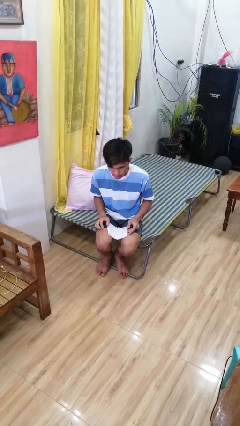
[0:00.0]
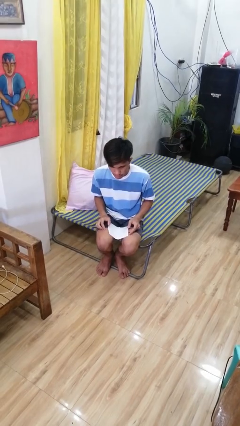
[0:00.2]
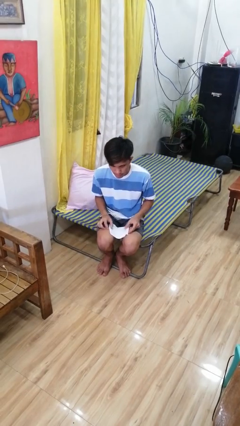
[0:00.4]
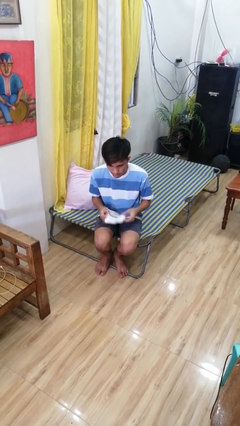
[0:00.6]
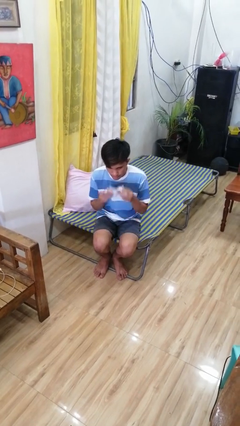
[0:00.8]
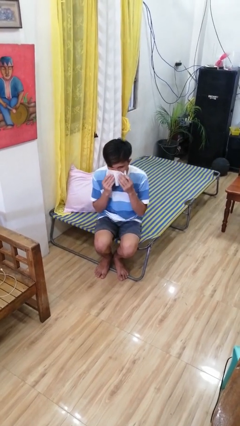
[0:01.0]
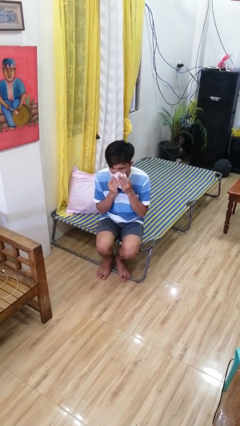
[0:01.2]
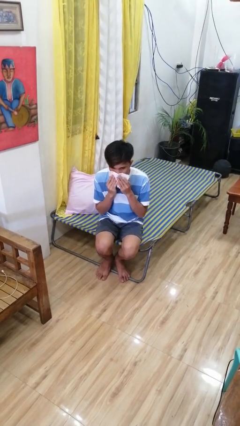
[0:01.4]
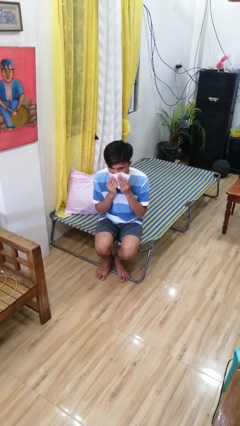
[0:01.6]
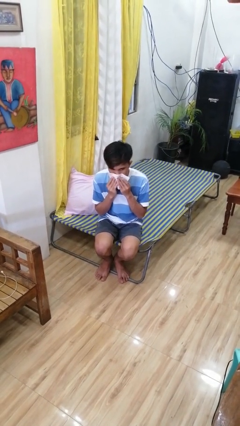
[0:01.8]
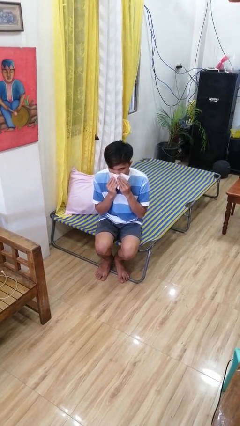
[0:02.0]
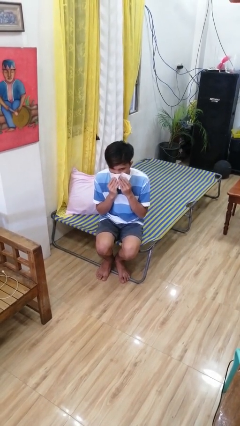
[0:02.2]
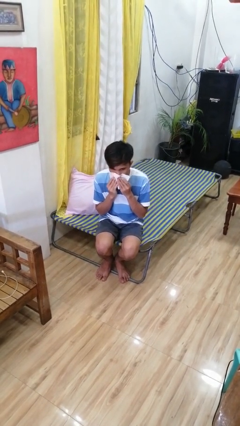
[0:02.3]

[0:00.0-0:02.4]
person wipes mouth with napkin

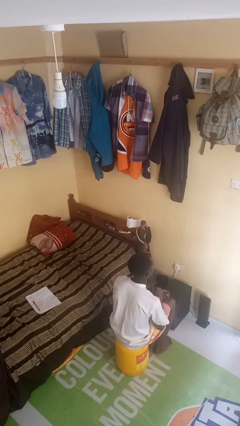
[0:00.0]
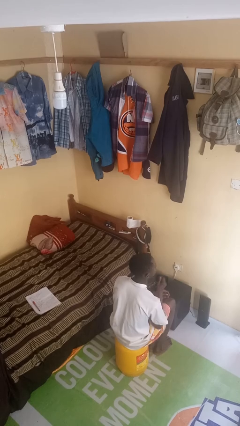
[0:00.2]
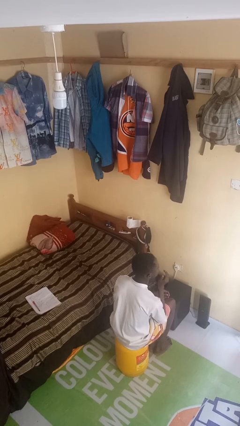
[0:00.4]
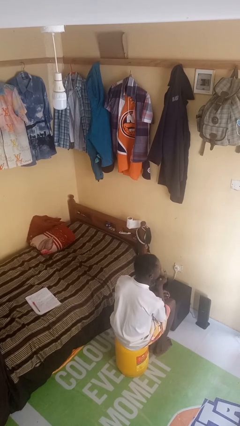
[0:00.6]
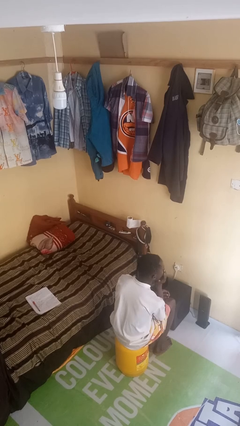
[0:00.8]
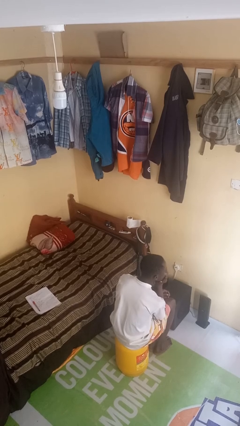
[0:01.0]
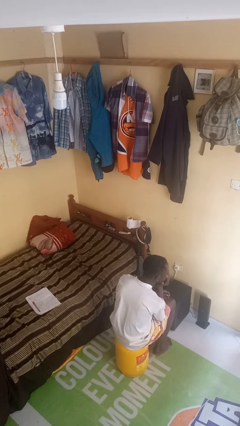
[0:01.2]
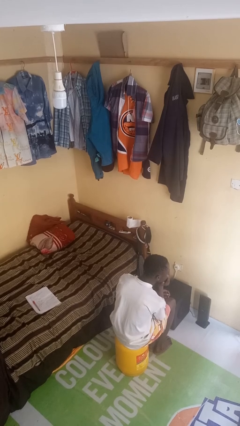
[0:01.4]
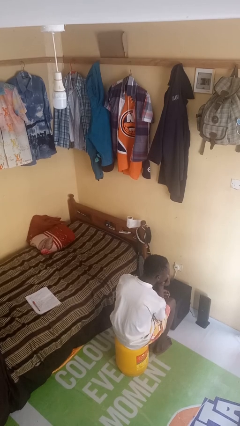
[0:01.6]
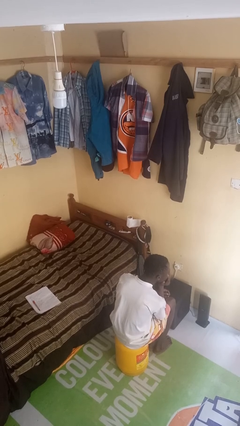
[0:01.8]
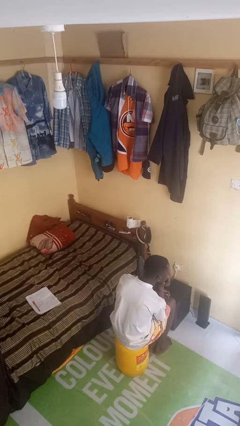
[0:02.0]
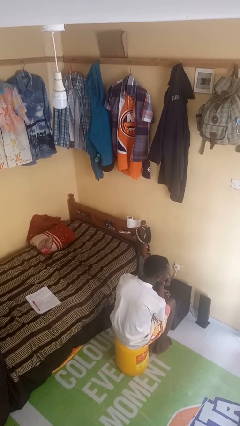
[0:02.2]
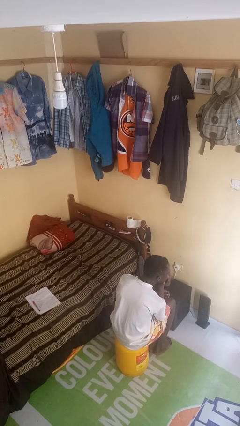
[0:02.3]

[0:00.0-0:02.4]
person strokes chin

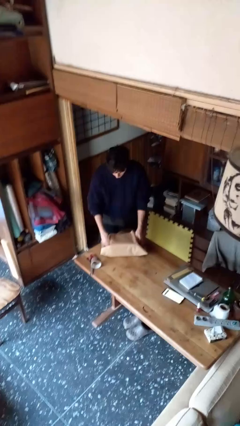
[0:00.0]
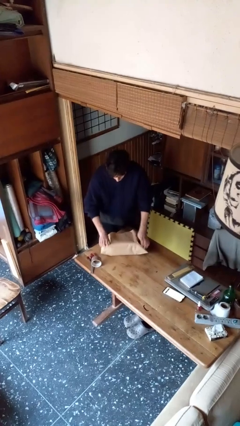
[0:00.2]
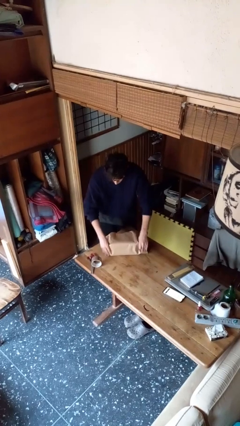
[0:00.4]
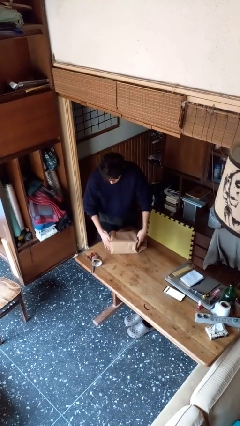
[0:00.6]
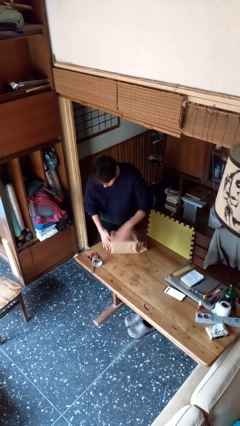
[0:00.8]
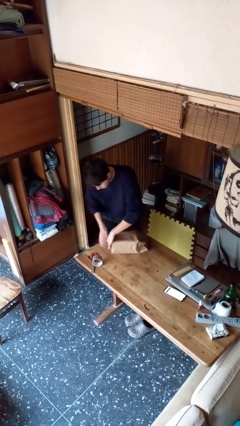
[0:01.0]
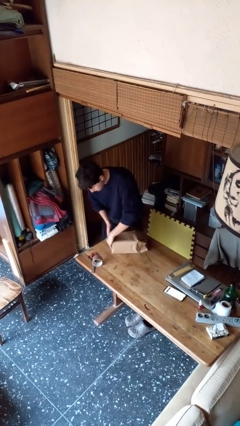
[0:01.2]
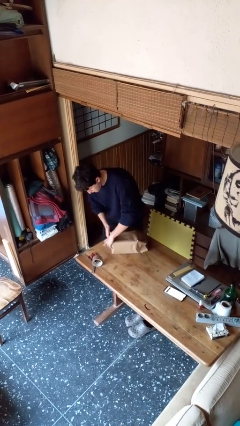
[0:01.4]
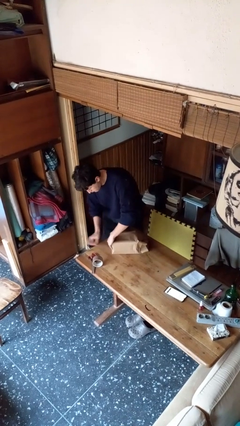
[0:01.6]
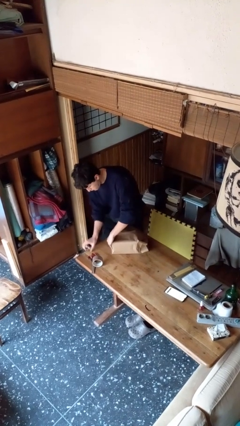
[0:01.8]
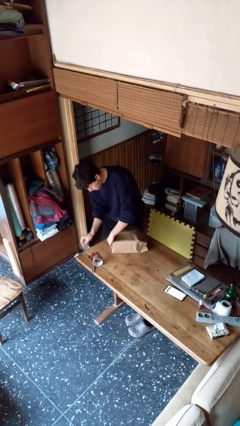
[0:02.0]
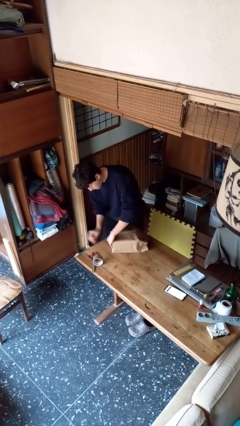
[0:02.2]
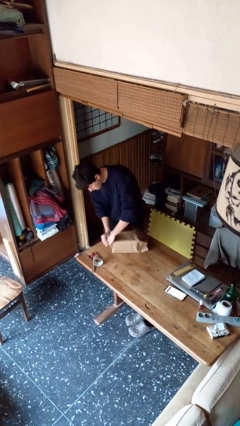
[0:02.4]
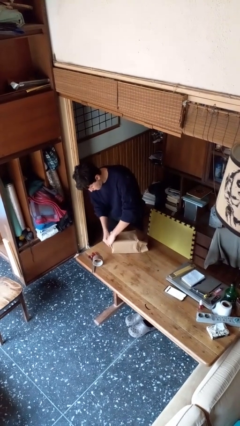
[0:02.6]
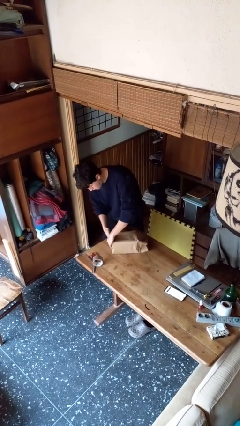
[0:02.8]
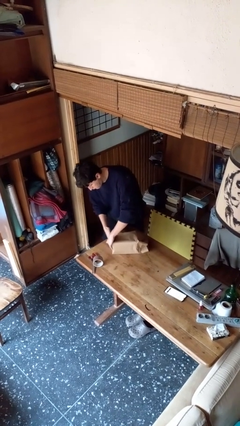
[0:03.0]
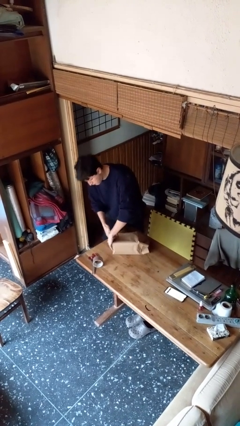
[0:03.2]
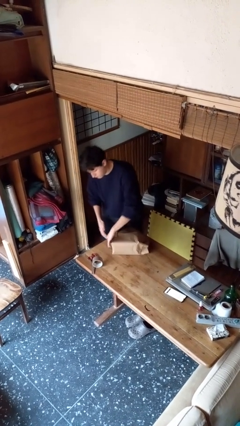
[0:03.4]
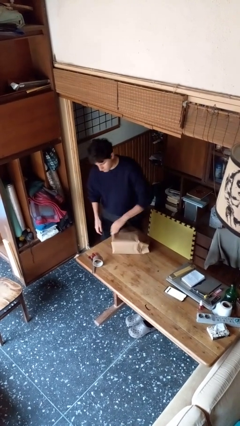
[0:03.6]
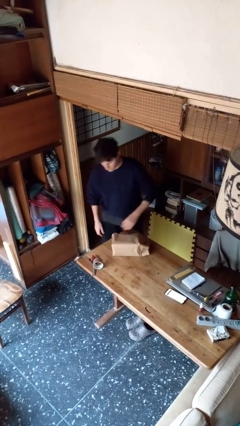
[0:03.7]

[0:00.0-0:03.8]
person wraps box

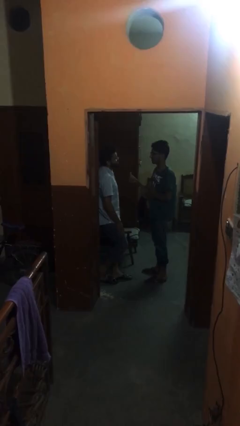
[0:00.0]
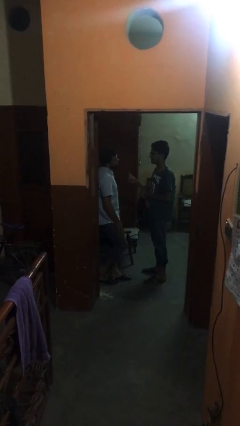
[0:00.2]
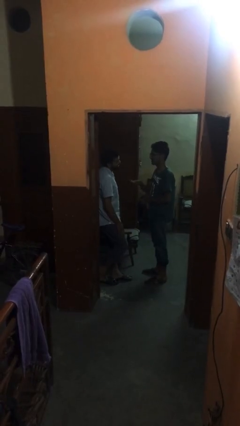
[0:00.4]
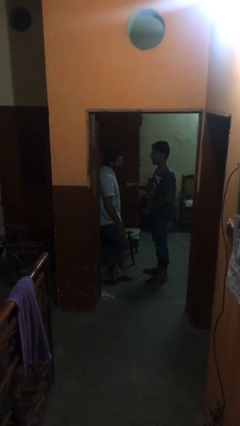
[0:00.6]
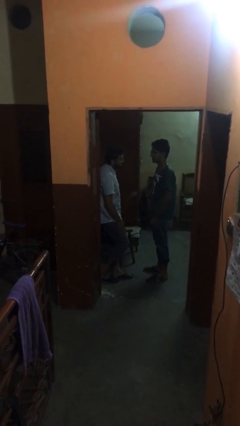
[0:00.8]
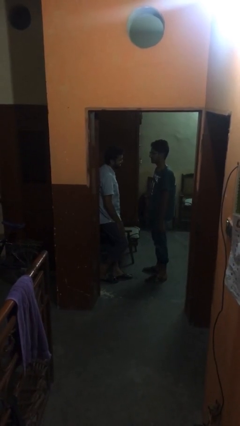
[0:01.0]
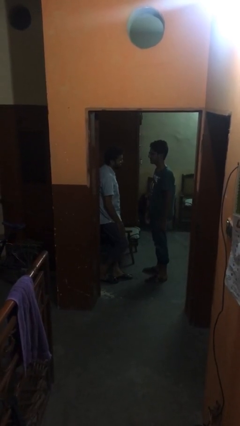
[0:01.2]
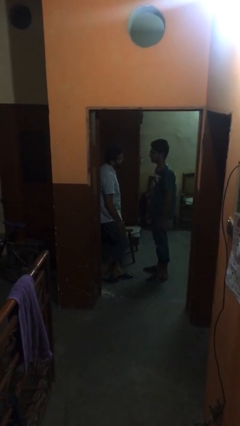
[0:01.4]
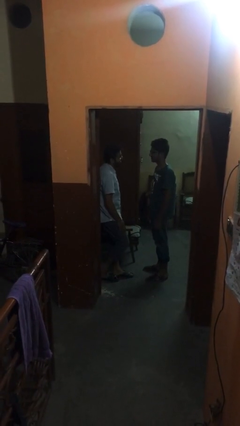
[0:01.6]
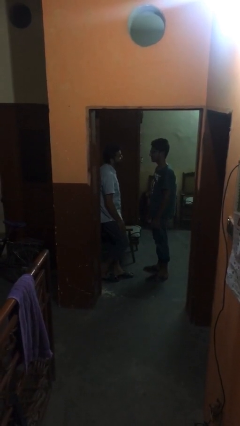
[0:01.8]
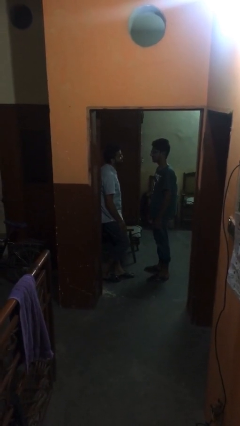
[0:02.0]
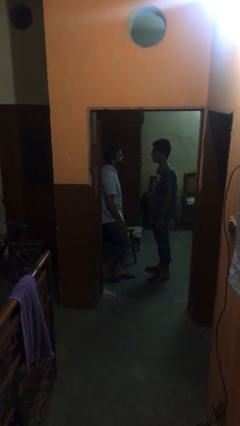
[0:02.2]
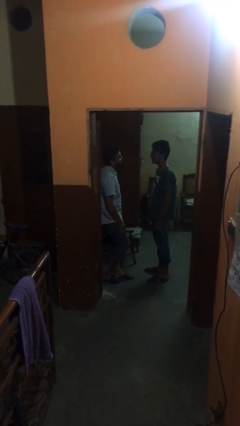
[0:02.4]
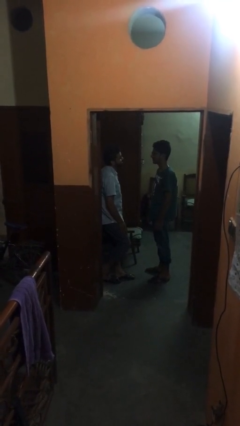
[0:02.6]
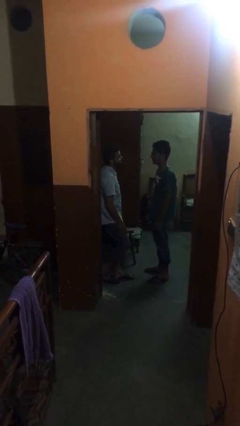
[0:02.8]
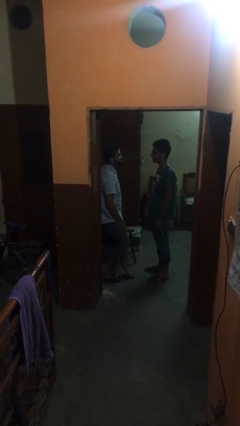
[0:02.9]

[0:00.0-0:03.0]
person talks to person

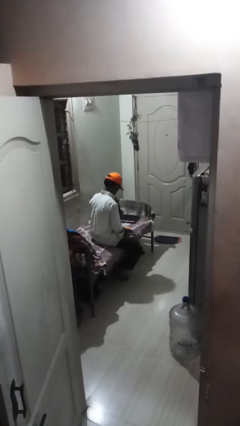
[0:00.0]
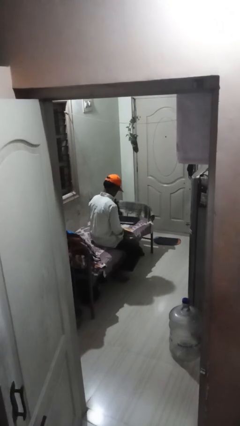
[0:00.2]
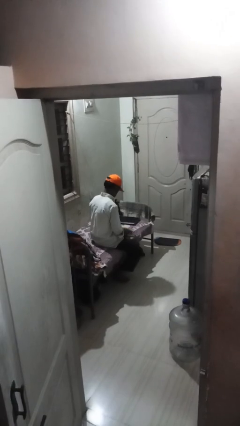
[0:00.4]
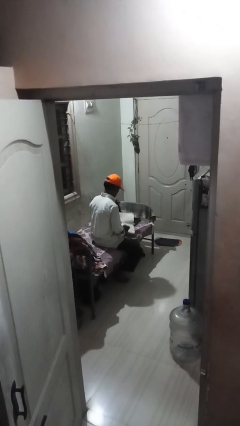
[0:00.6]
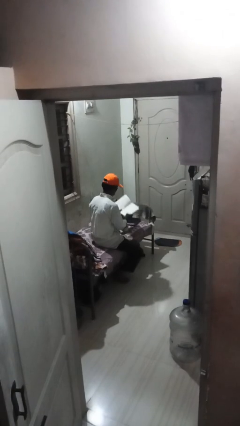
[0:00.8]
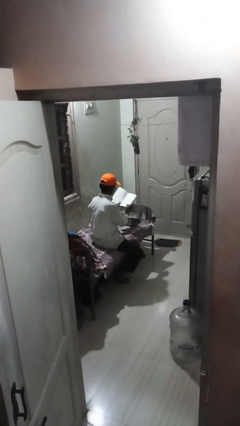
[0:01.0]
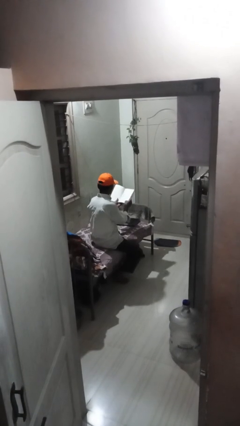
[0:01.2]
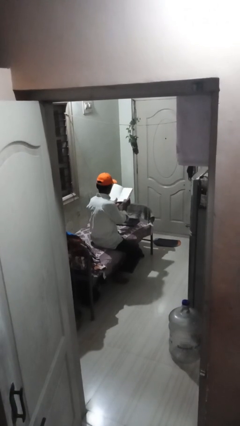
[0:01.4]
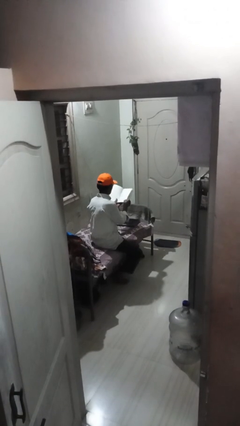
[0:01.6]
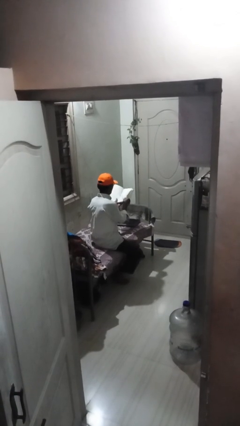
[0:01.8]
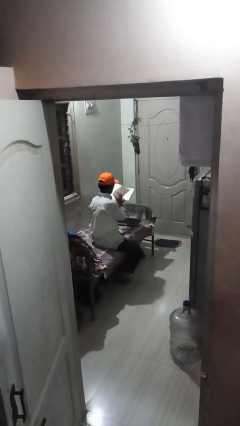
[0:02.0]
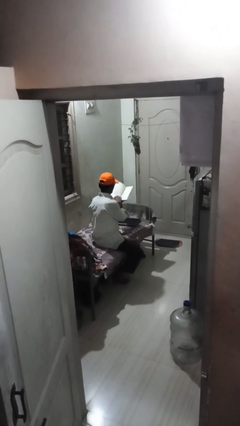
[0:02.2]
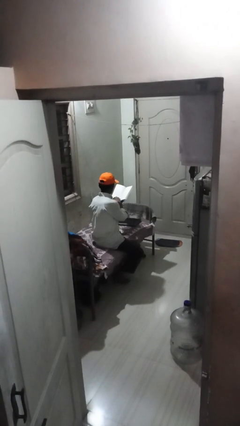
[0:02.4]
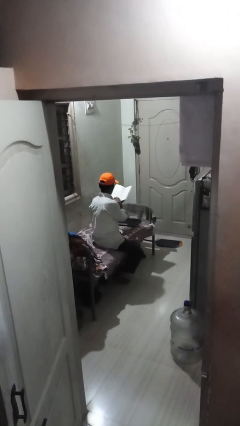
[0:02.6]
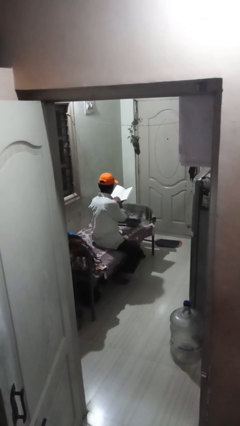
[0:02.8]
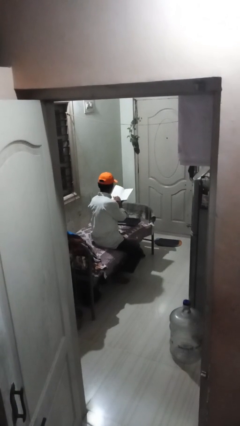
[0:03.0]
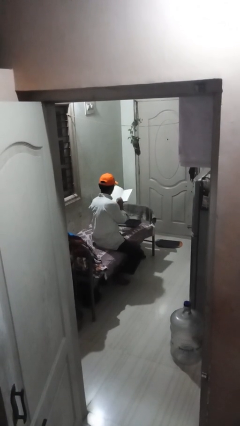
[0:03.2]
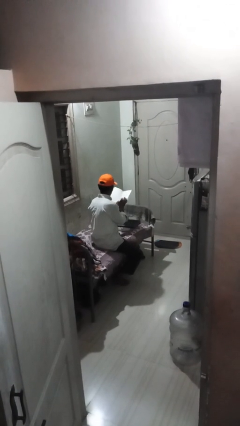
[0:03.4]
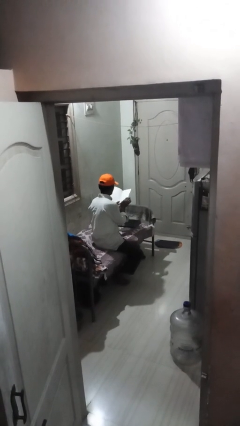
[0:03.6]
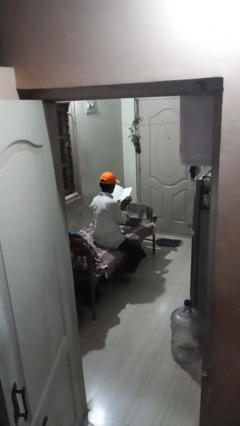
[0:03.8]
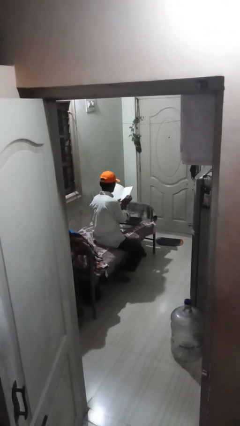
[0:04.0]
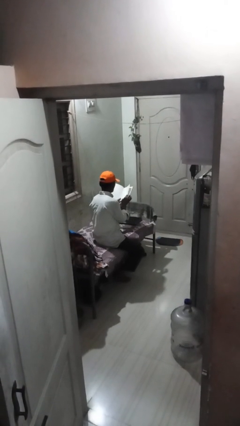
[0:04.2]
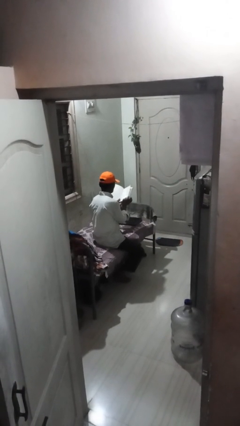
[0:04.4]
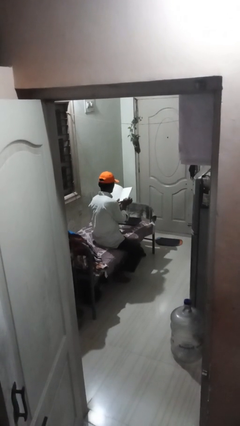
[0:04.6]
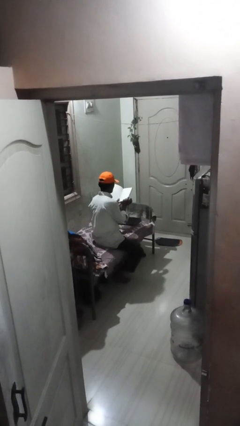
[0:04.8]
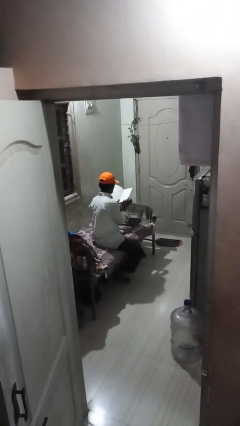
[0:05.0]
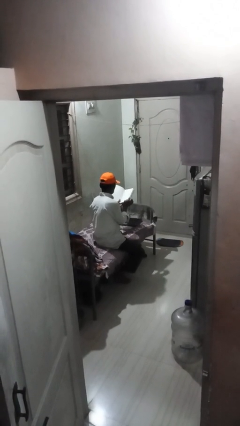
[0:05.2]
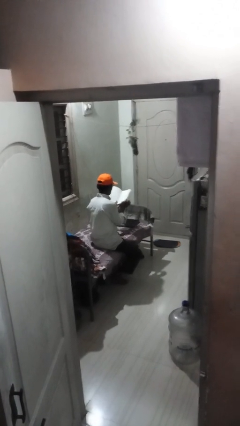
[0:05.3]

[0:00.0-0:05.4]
person reads book

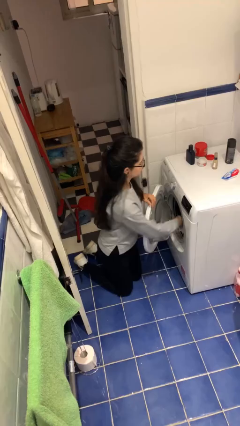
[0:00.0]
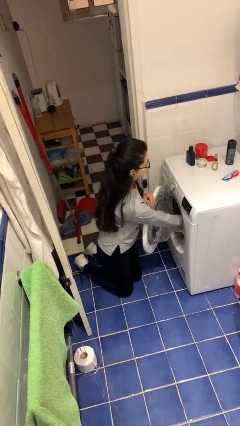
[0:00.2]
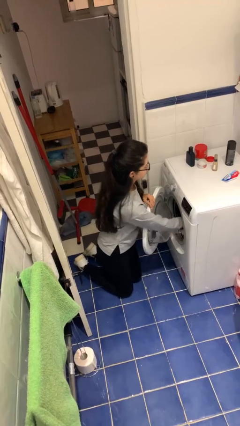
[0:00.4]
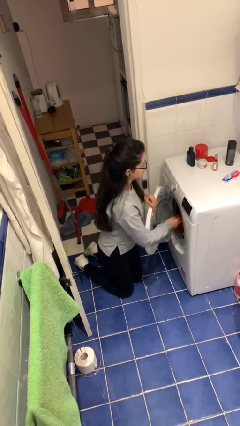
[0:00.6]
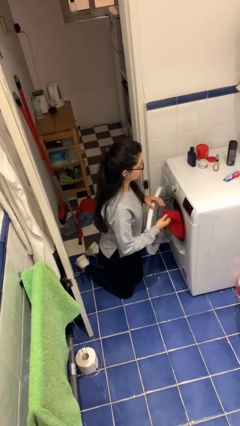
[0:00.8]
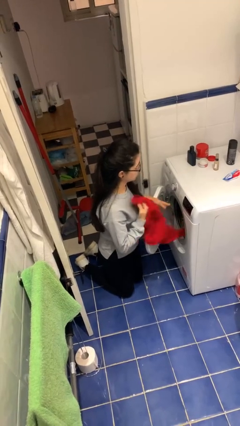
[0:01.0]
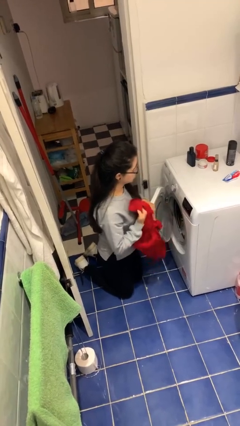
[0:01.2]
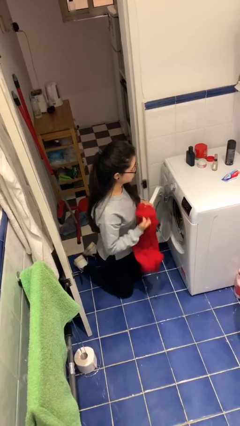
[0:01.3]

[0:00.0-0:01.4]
person unloads dryer
